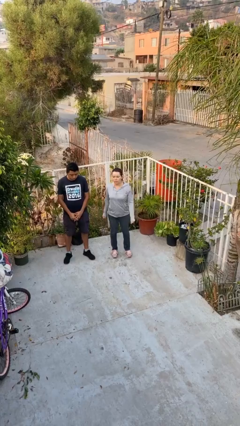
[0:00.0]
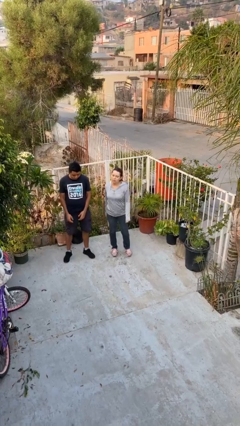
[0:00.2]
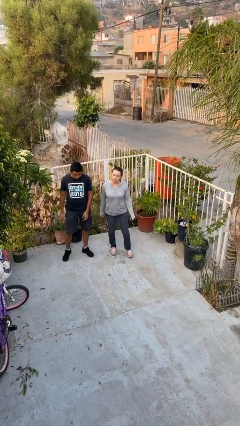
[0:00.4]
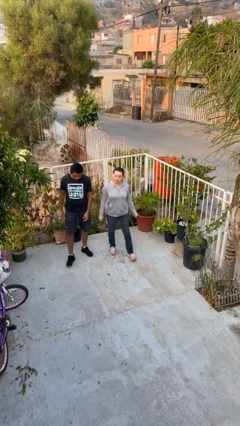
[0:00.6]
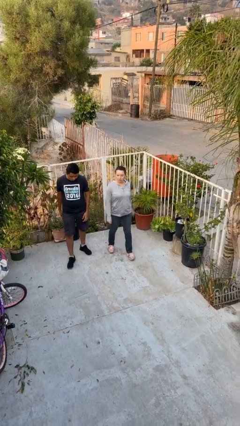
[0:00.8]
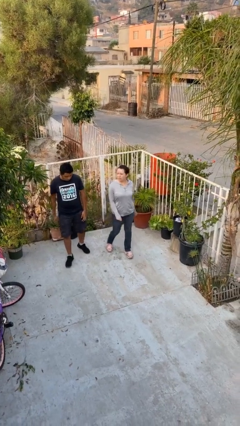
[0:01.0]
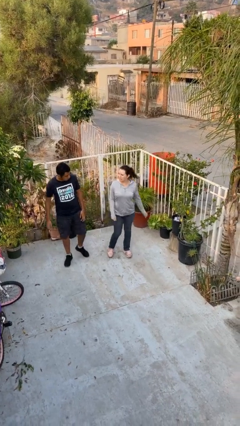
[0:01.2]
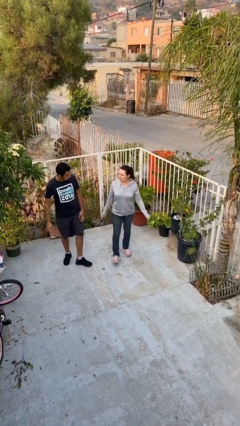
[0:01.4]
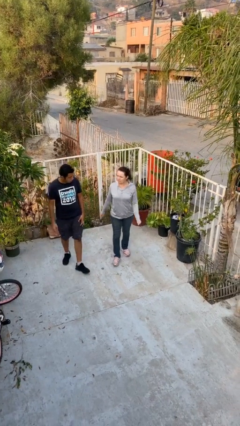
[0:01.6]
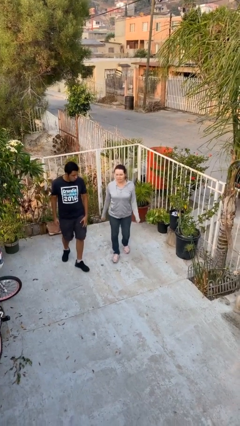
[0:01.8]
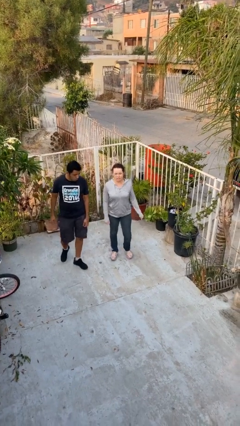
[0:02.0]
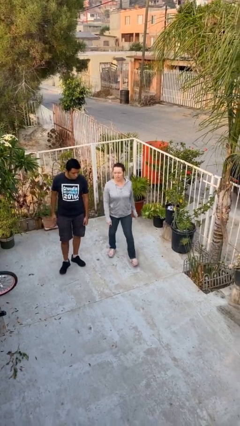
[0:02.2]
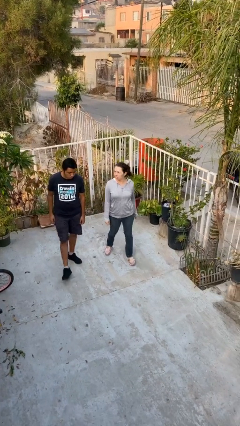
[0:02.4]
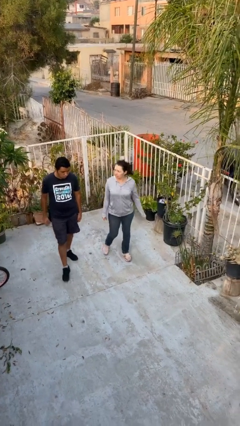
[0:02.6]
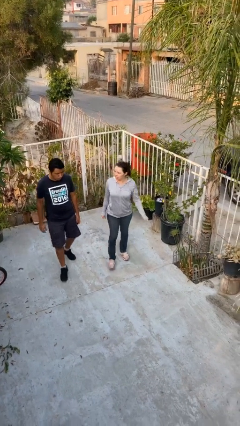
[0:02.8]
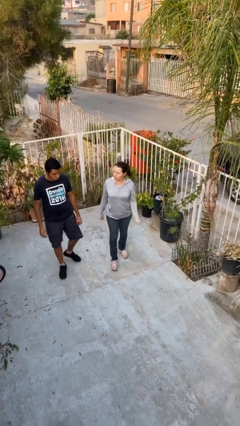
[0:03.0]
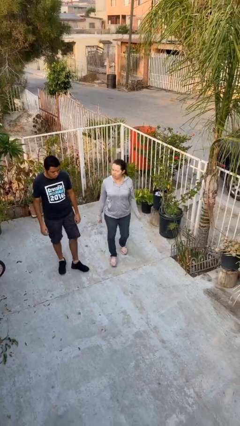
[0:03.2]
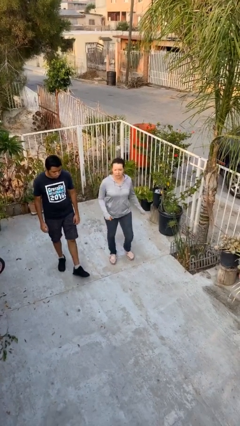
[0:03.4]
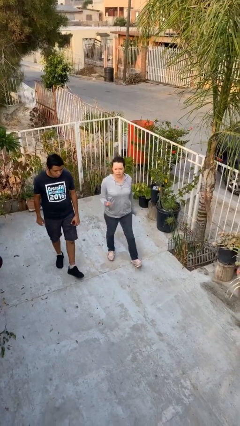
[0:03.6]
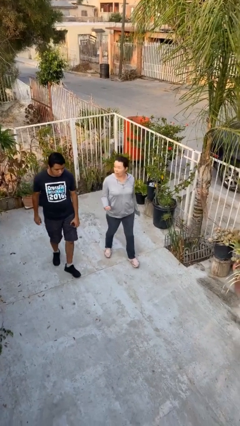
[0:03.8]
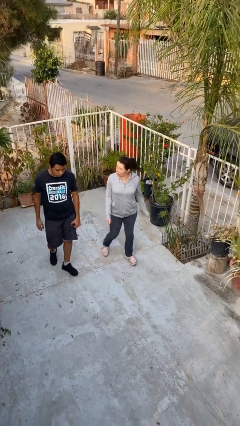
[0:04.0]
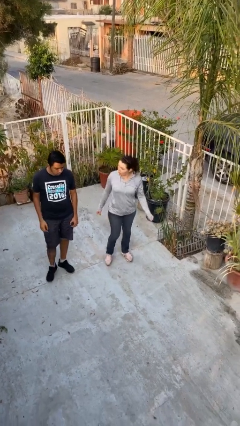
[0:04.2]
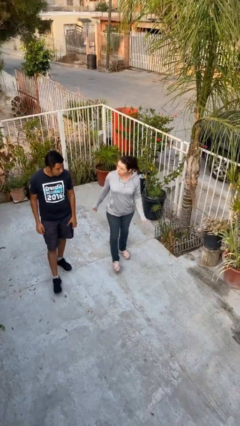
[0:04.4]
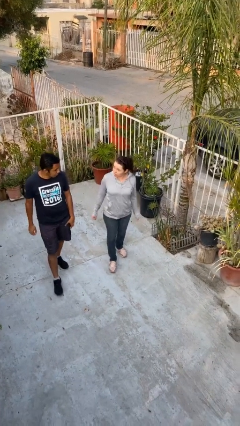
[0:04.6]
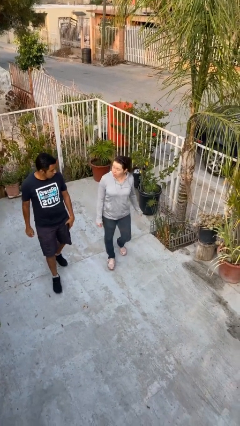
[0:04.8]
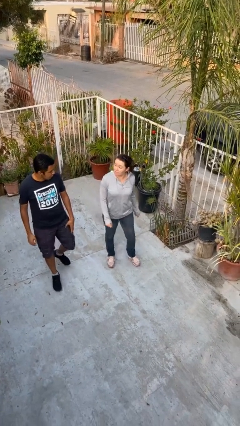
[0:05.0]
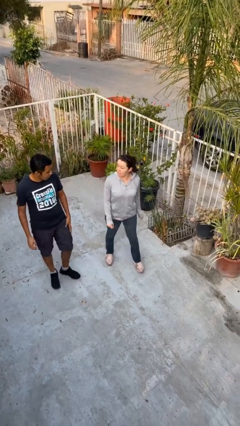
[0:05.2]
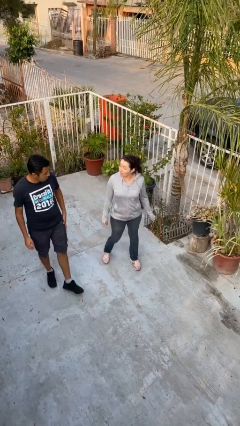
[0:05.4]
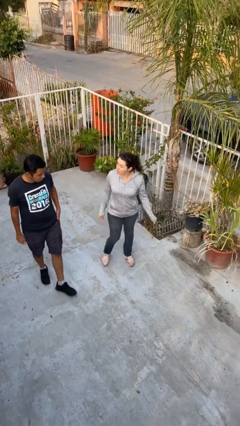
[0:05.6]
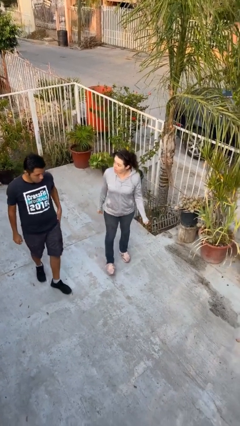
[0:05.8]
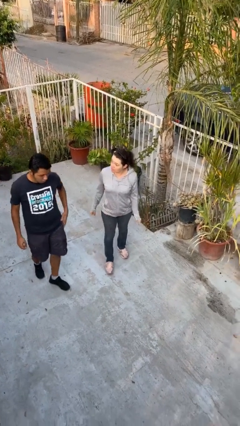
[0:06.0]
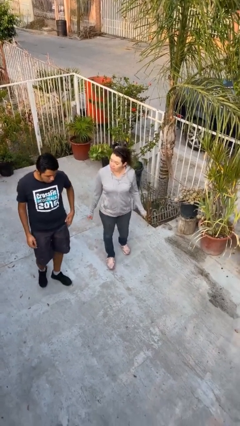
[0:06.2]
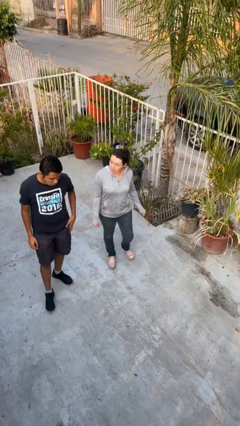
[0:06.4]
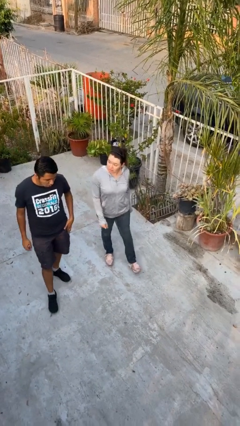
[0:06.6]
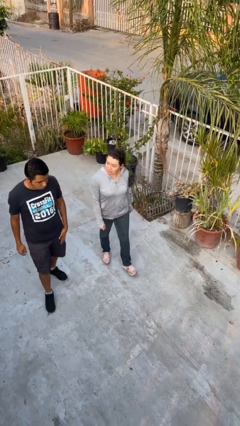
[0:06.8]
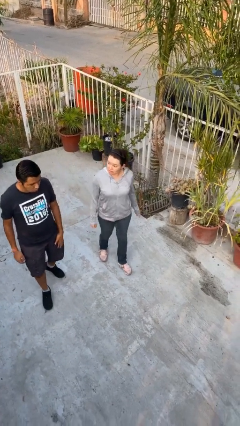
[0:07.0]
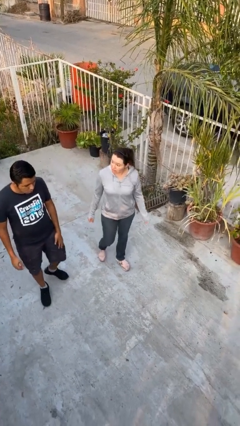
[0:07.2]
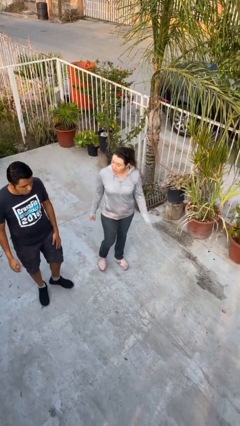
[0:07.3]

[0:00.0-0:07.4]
person steals object from person

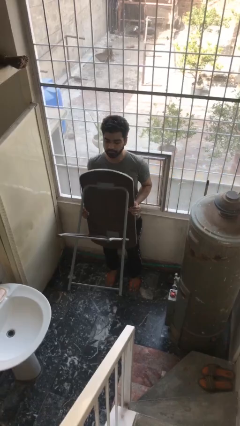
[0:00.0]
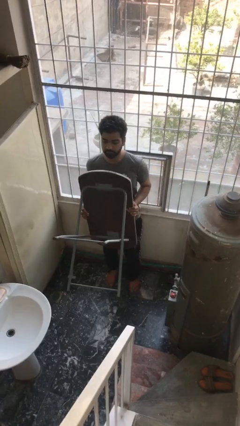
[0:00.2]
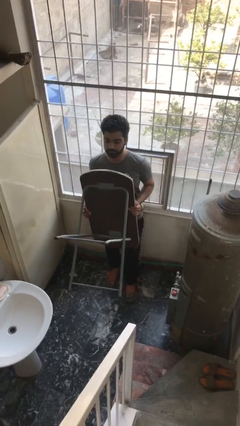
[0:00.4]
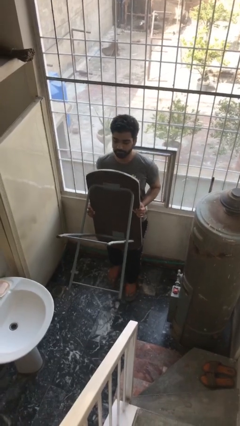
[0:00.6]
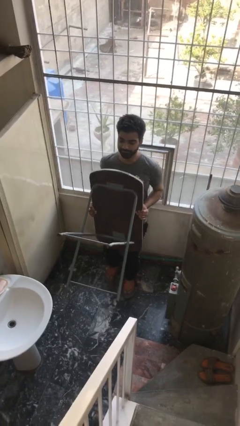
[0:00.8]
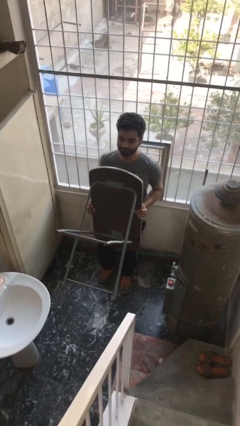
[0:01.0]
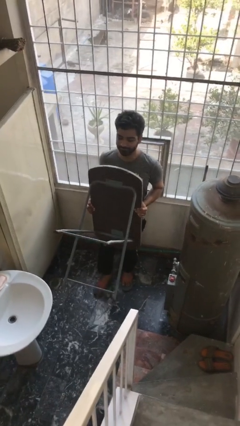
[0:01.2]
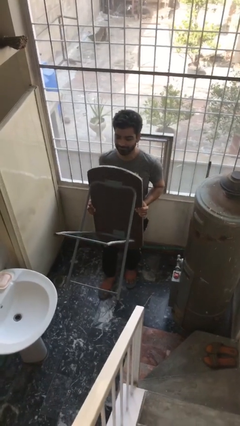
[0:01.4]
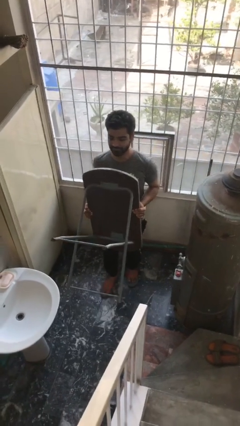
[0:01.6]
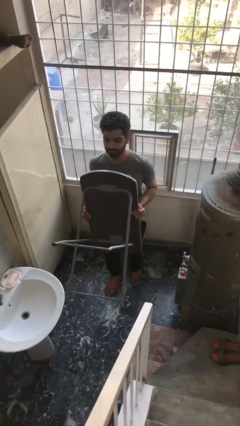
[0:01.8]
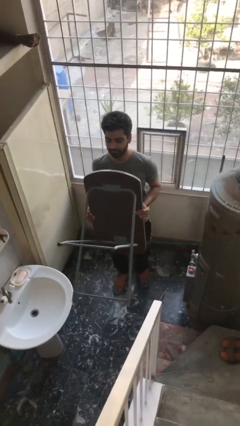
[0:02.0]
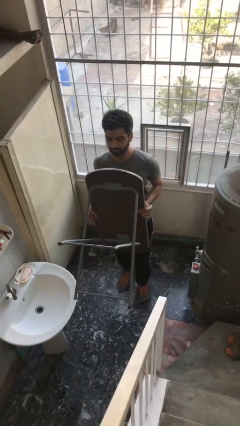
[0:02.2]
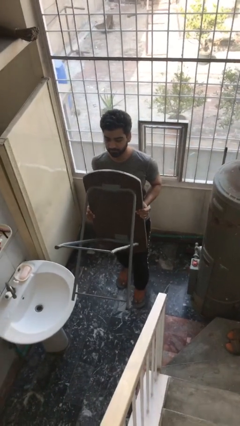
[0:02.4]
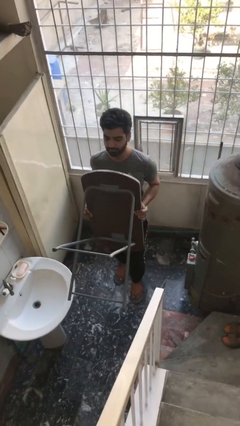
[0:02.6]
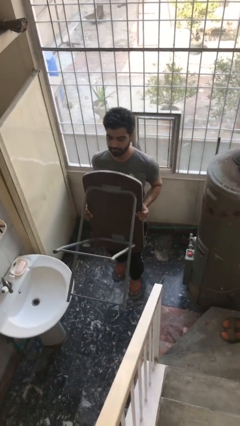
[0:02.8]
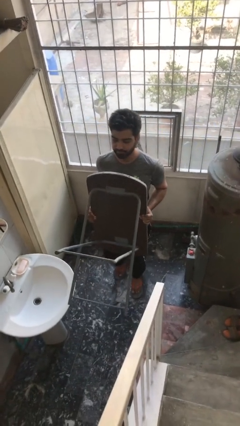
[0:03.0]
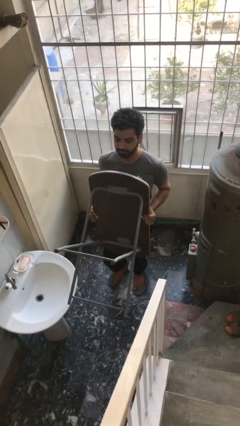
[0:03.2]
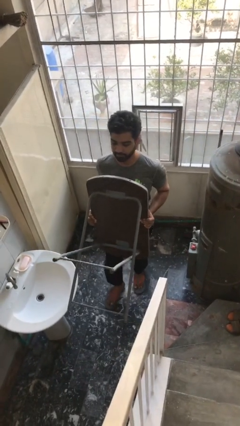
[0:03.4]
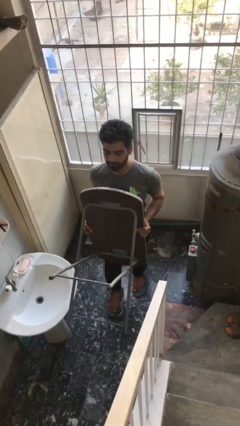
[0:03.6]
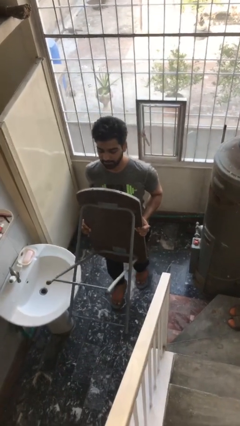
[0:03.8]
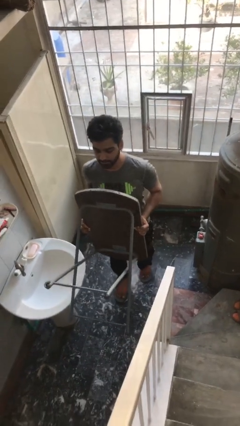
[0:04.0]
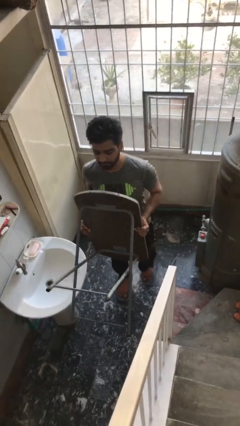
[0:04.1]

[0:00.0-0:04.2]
person carries heavy object

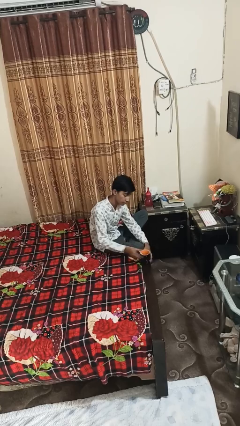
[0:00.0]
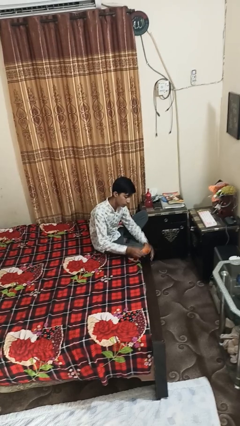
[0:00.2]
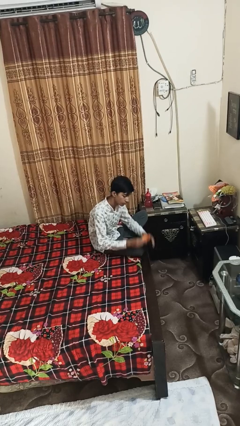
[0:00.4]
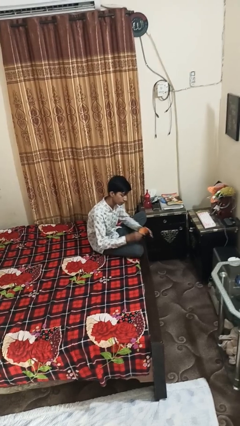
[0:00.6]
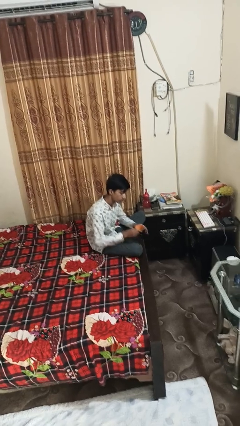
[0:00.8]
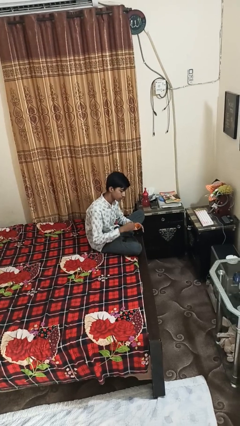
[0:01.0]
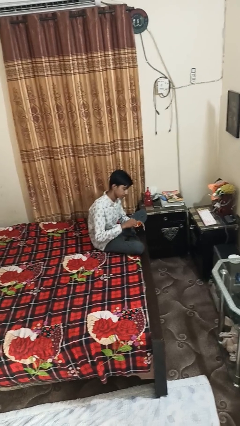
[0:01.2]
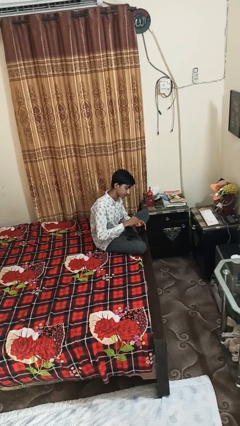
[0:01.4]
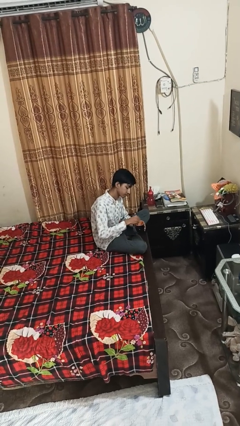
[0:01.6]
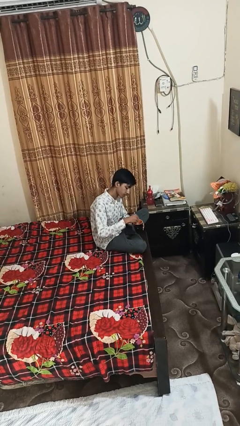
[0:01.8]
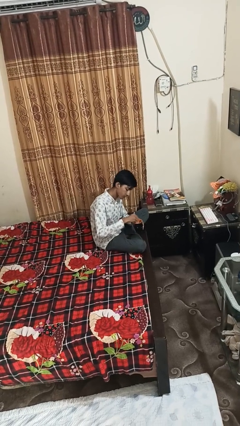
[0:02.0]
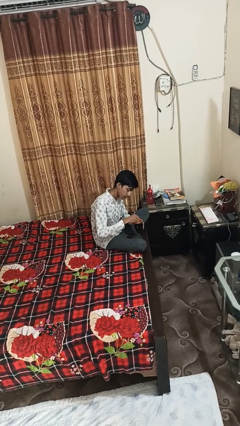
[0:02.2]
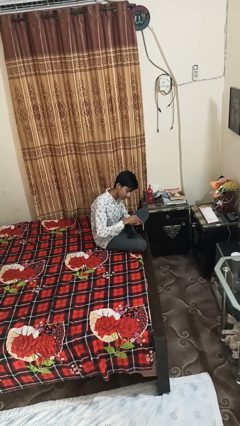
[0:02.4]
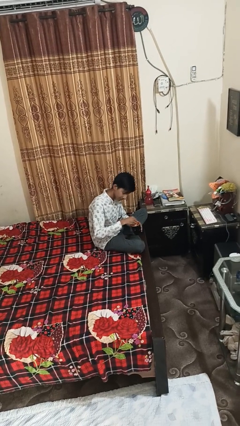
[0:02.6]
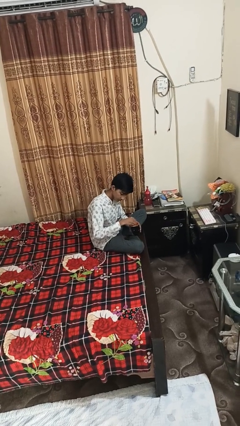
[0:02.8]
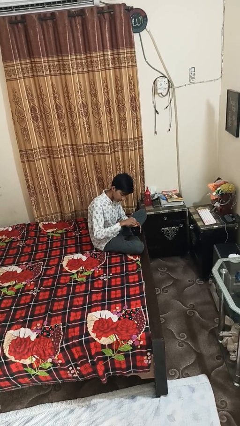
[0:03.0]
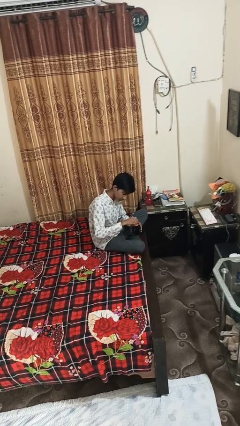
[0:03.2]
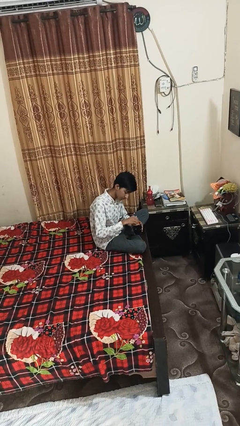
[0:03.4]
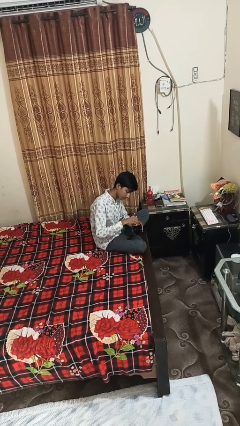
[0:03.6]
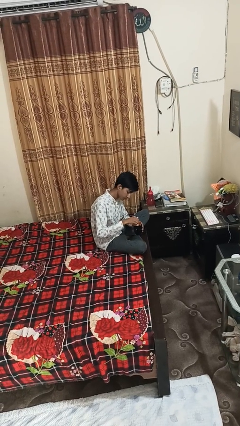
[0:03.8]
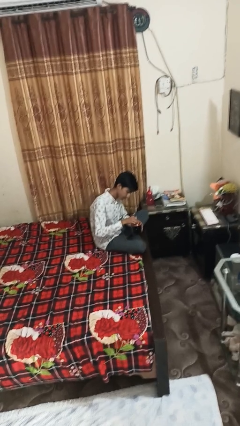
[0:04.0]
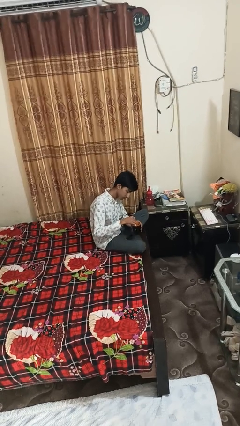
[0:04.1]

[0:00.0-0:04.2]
person stirs mug

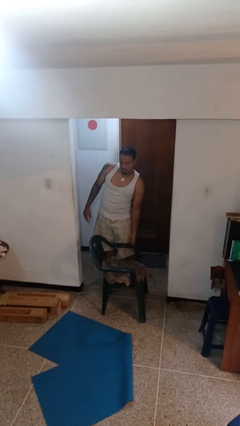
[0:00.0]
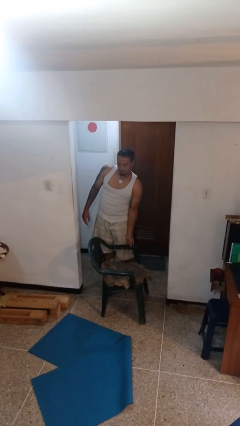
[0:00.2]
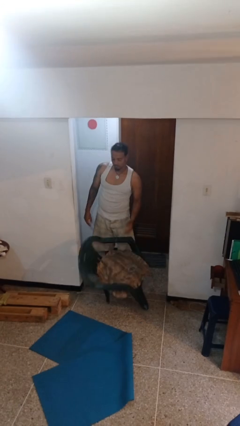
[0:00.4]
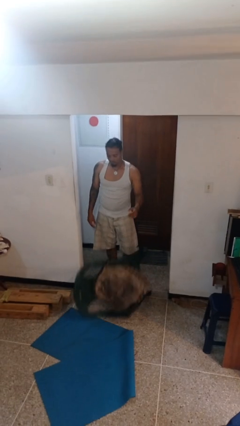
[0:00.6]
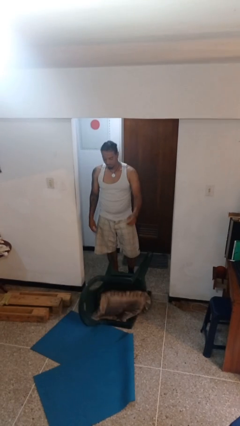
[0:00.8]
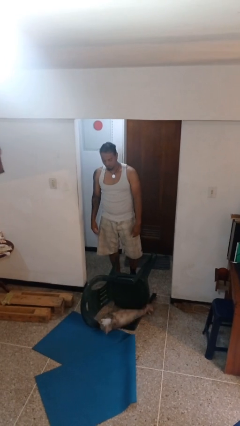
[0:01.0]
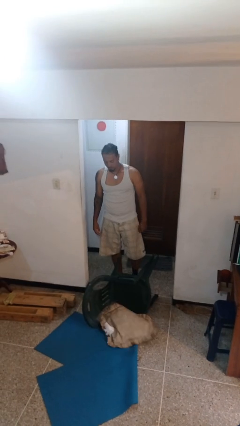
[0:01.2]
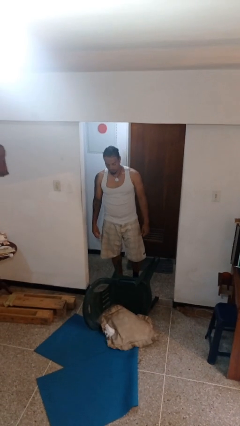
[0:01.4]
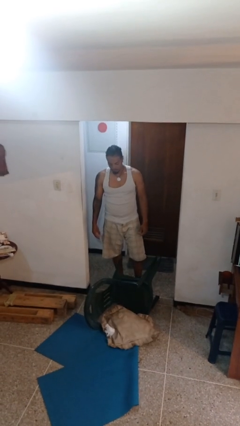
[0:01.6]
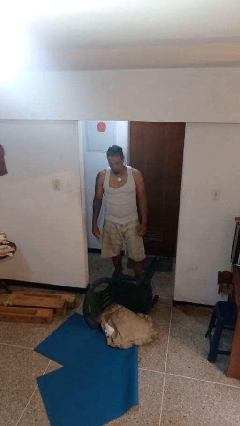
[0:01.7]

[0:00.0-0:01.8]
person knocks over furniture

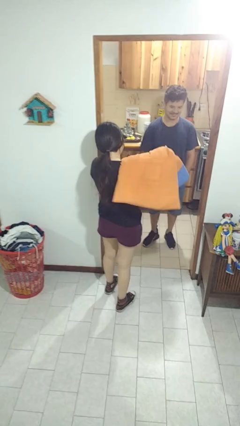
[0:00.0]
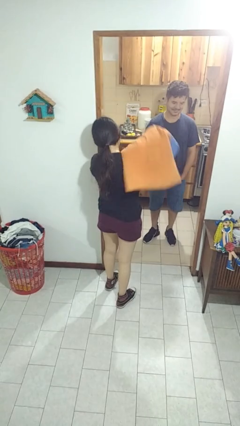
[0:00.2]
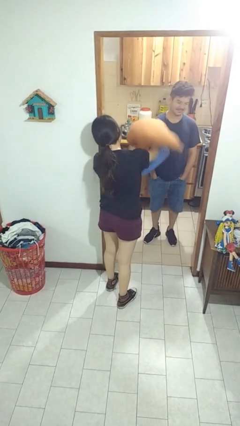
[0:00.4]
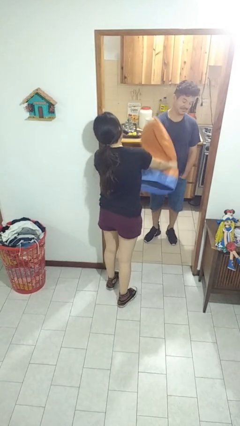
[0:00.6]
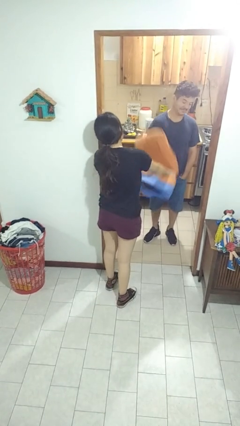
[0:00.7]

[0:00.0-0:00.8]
person hits person with pillow
